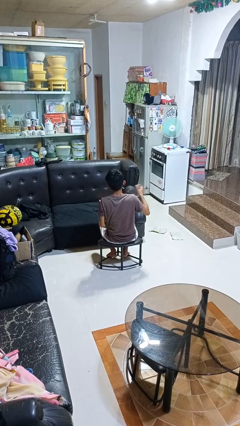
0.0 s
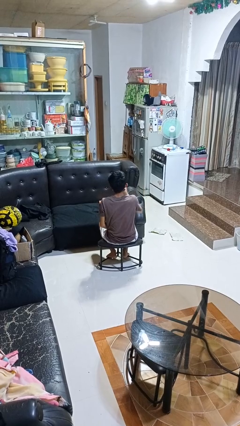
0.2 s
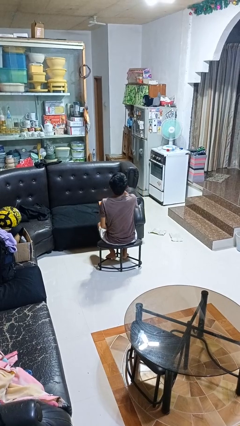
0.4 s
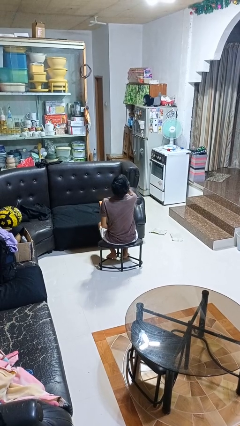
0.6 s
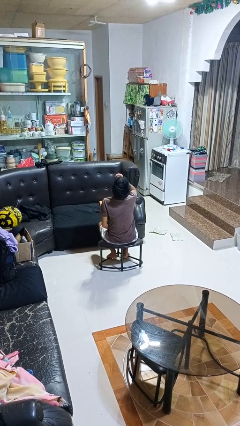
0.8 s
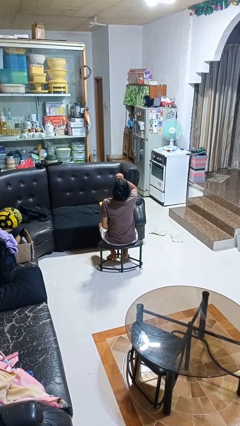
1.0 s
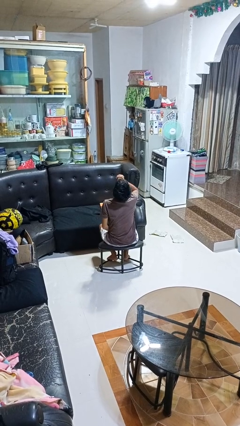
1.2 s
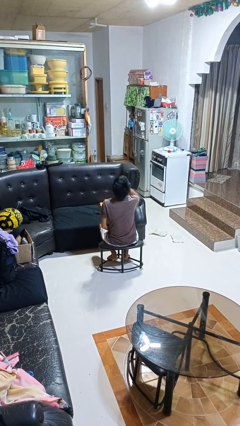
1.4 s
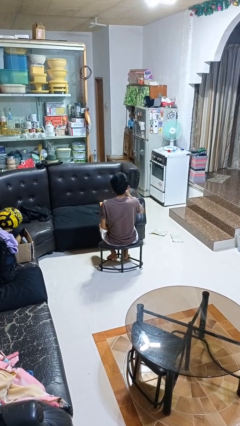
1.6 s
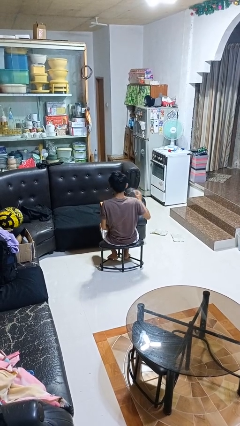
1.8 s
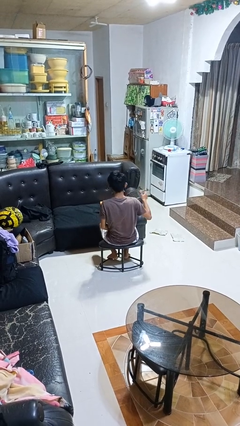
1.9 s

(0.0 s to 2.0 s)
person drinks from beverage can

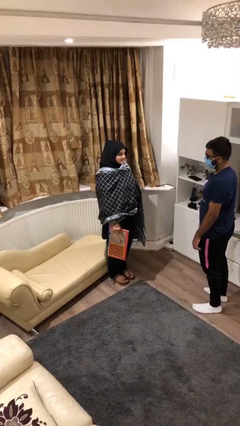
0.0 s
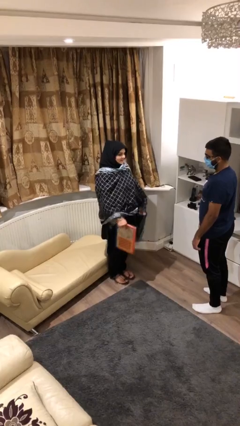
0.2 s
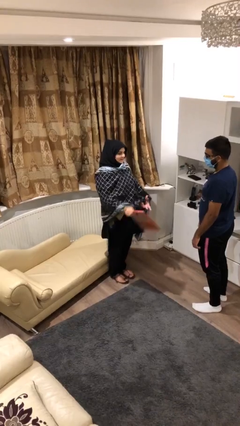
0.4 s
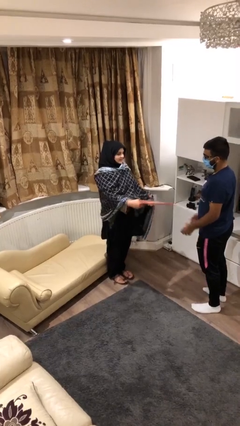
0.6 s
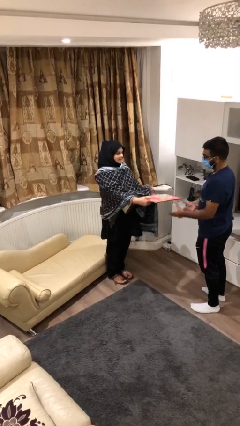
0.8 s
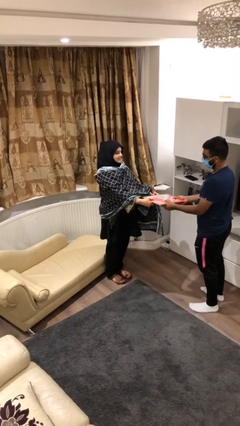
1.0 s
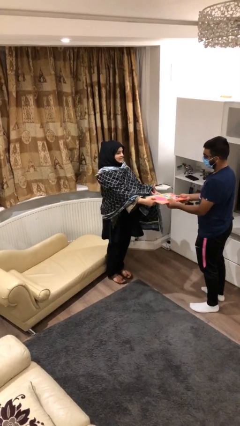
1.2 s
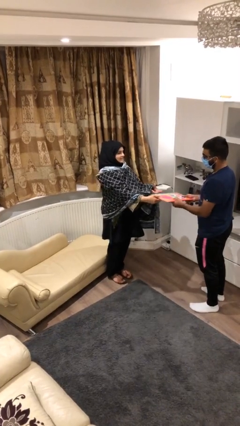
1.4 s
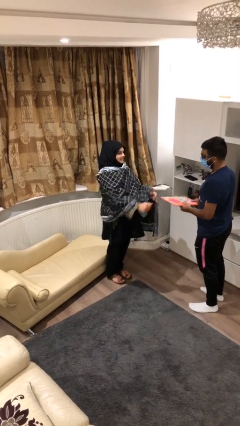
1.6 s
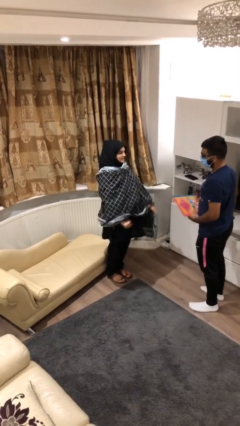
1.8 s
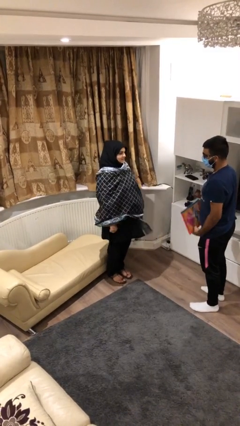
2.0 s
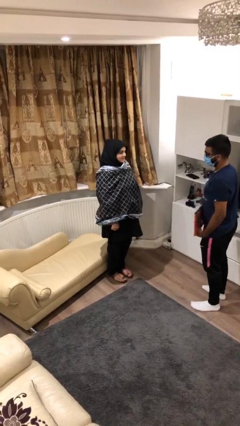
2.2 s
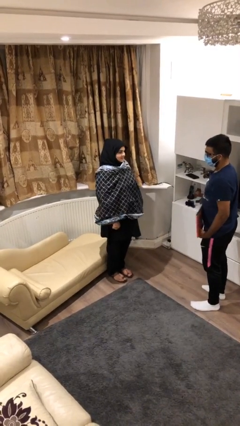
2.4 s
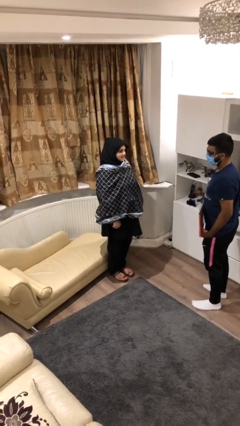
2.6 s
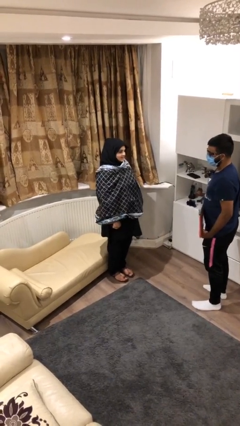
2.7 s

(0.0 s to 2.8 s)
person transfers object to person

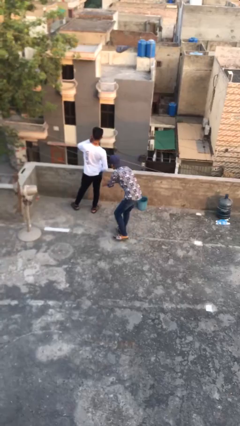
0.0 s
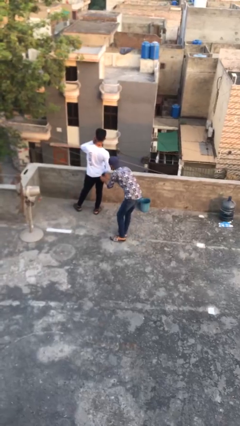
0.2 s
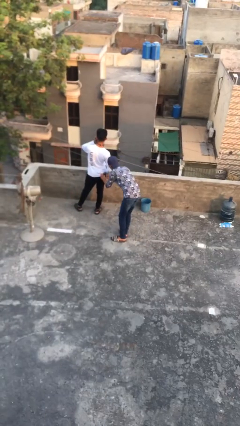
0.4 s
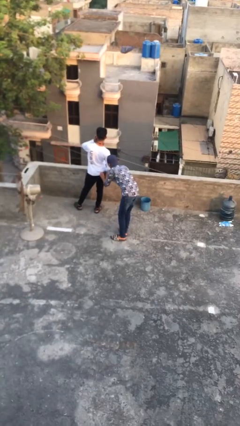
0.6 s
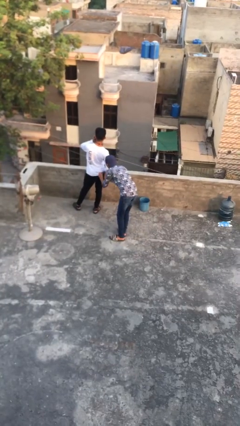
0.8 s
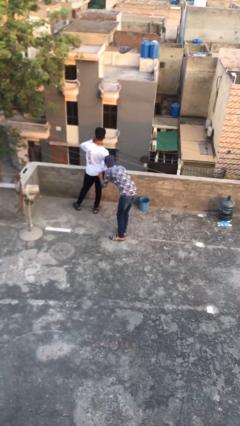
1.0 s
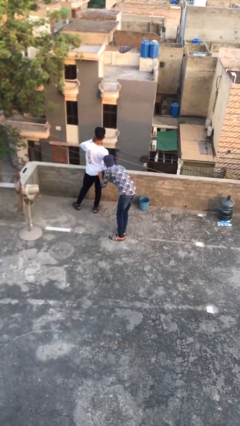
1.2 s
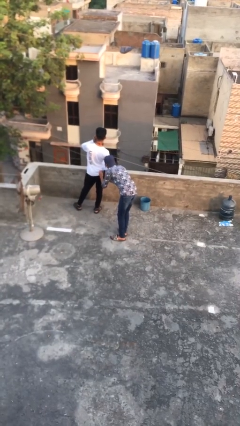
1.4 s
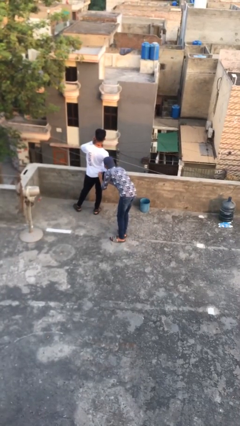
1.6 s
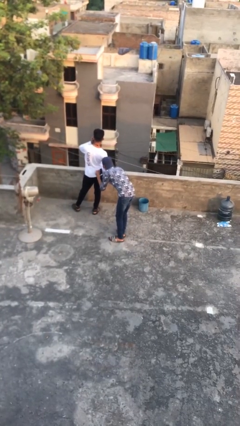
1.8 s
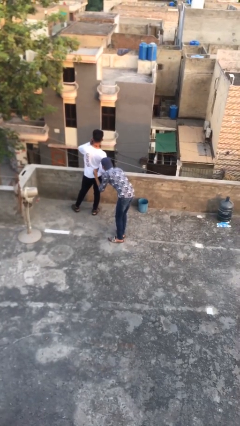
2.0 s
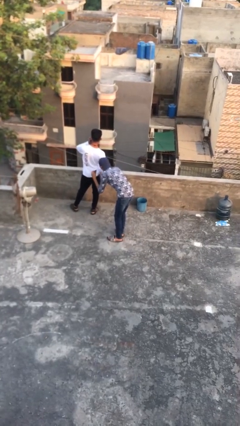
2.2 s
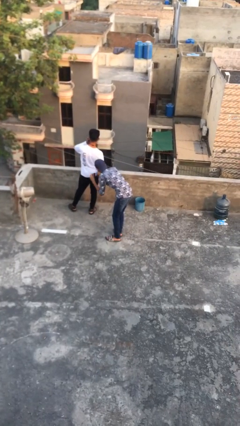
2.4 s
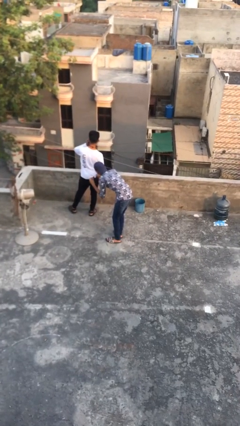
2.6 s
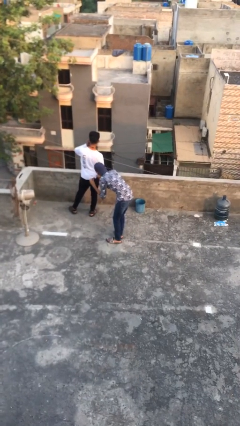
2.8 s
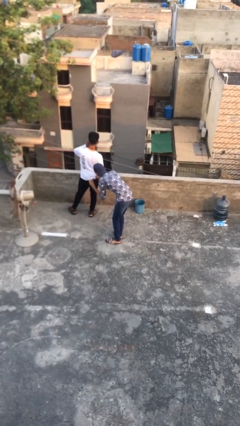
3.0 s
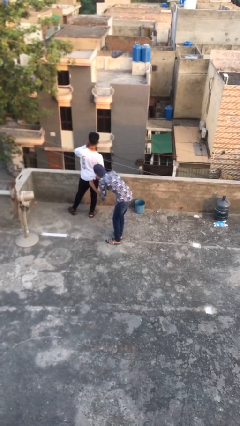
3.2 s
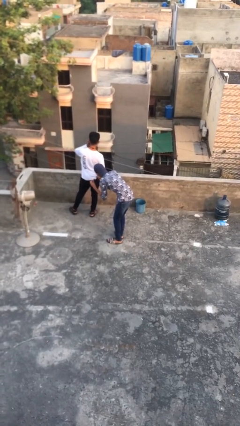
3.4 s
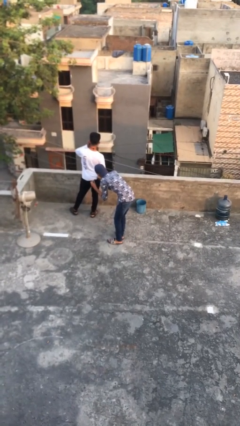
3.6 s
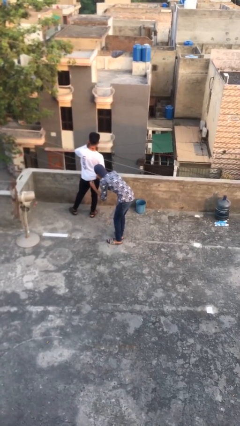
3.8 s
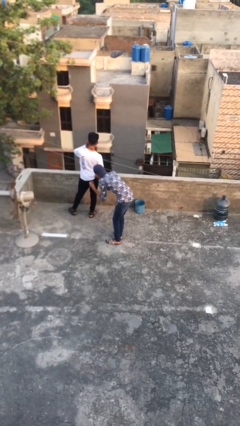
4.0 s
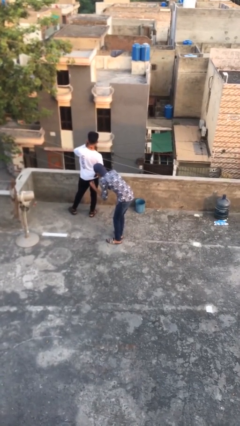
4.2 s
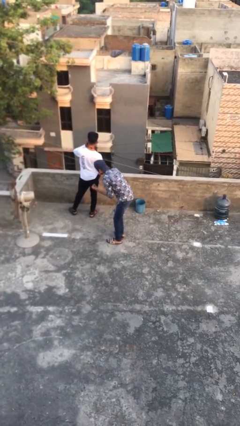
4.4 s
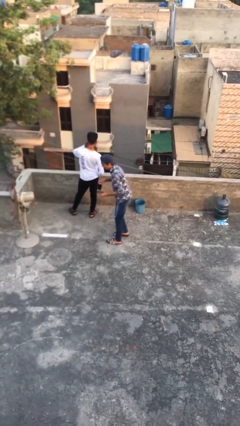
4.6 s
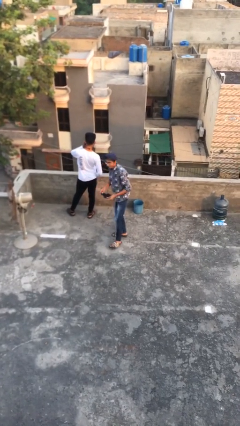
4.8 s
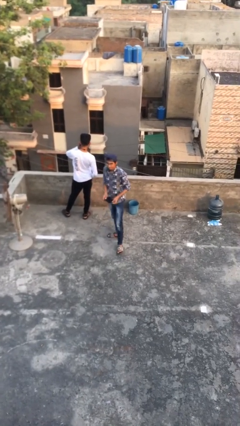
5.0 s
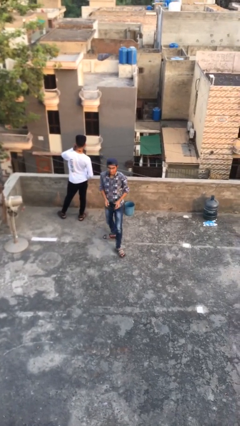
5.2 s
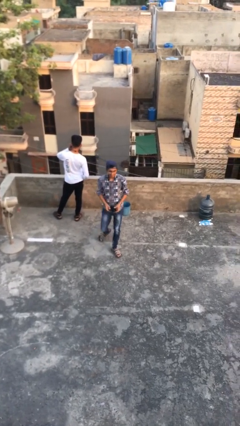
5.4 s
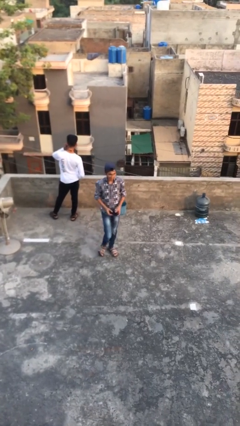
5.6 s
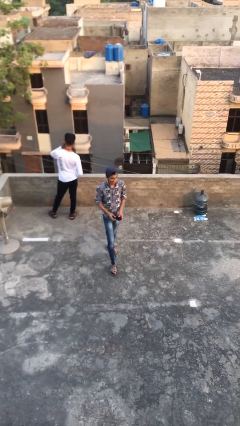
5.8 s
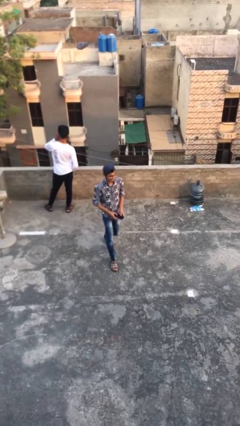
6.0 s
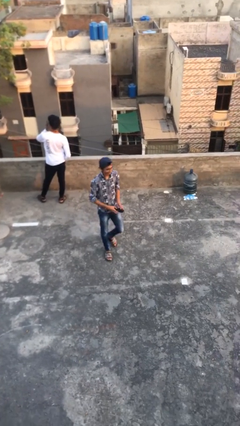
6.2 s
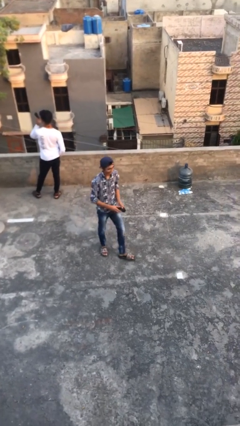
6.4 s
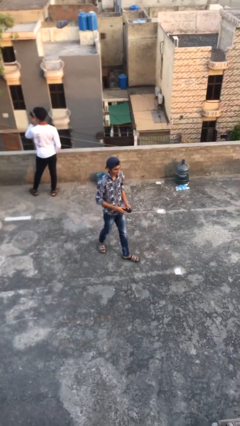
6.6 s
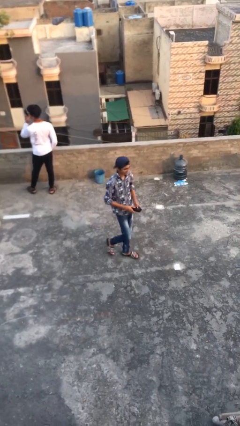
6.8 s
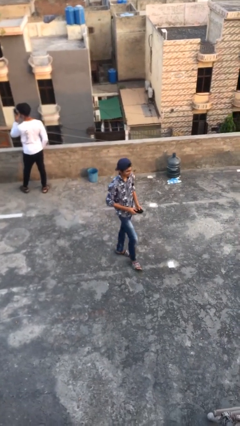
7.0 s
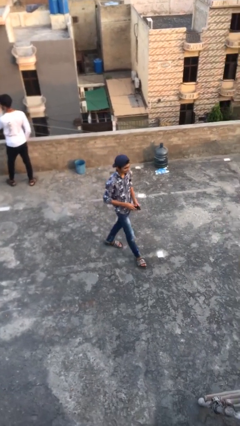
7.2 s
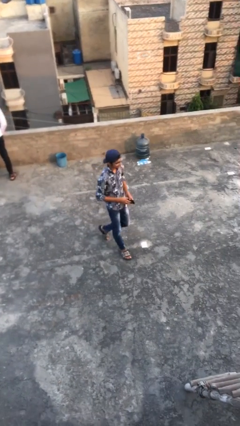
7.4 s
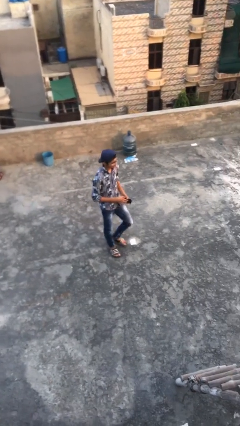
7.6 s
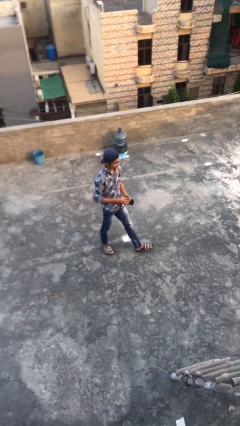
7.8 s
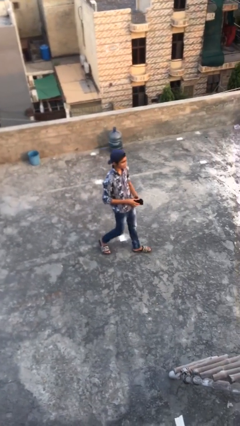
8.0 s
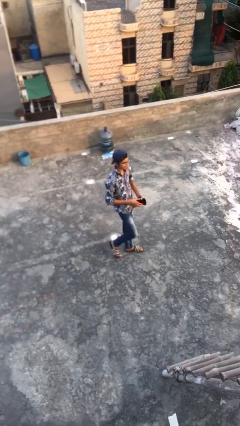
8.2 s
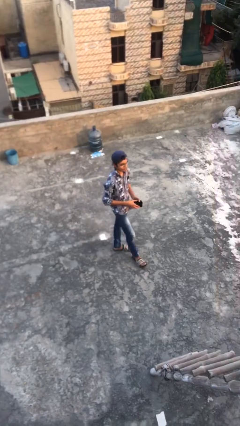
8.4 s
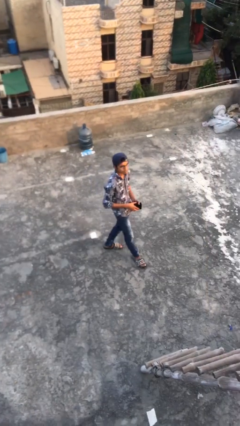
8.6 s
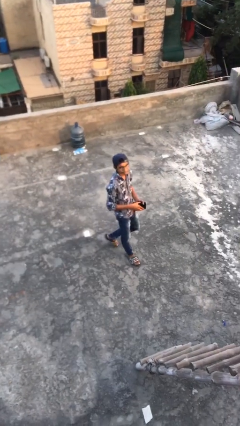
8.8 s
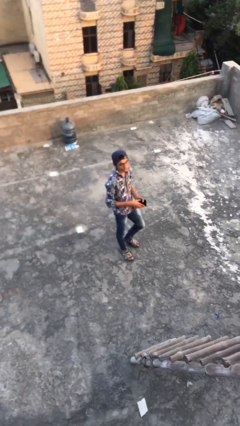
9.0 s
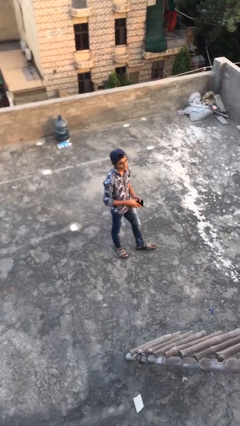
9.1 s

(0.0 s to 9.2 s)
person steals object from person

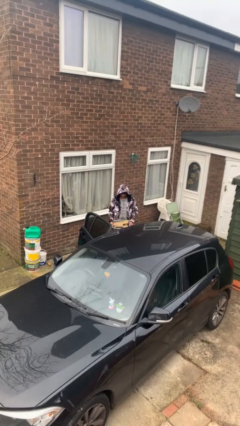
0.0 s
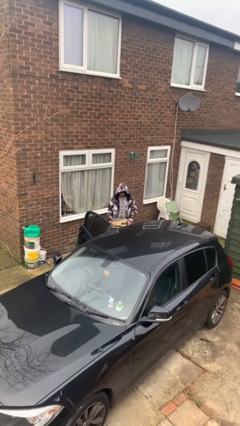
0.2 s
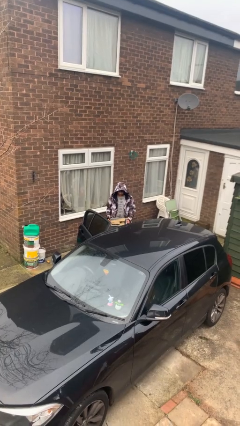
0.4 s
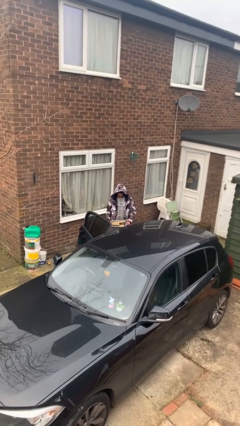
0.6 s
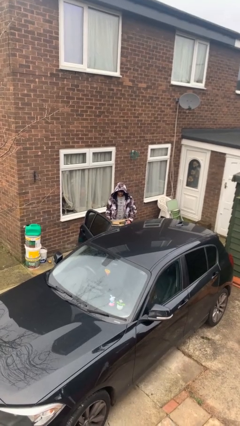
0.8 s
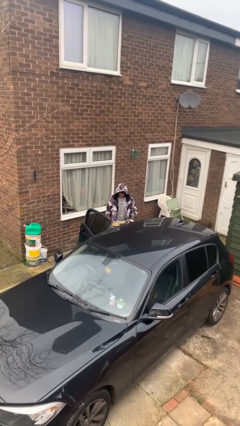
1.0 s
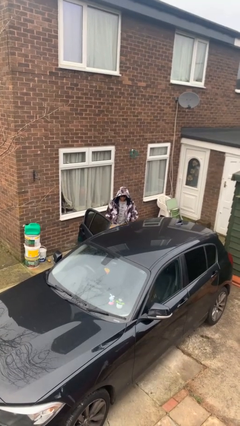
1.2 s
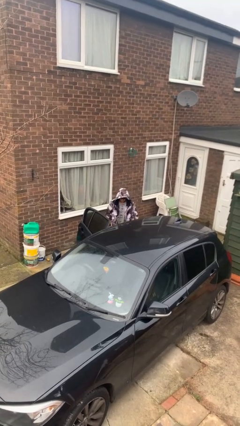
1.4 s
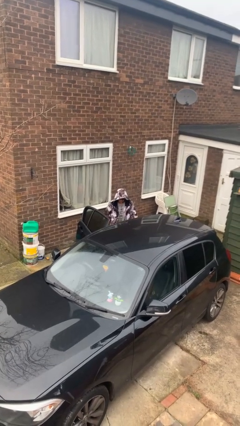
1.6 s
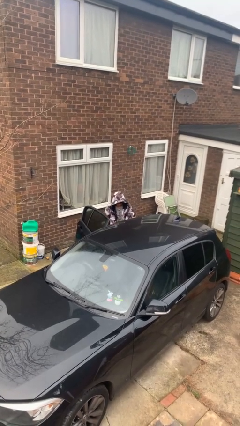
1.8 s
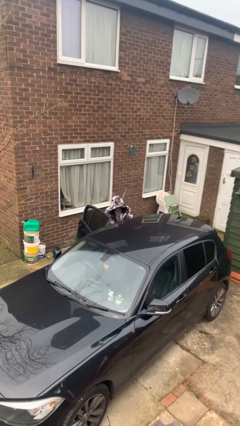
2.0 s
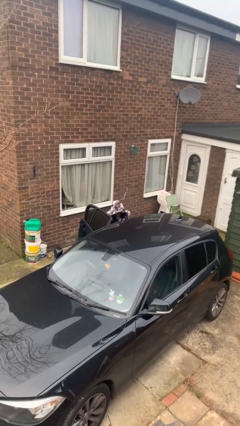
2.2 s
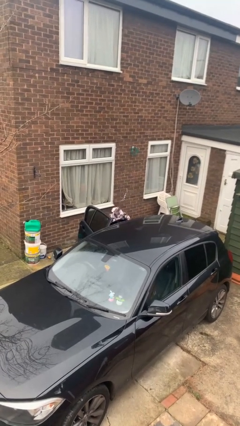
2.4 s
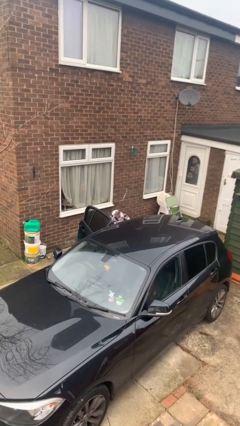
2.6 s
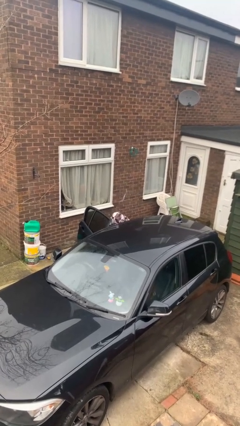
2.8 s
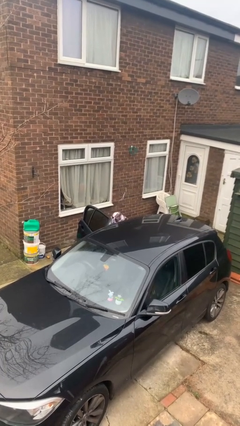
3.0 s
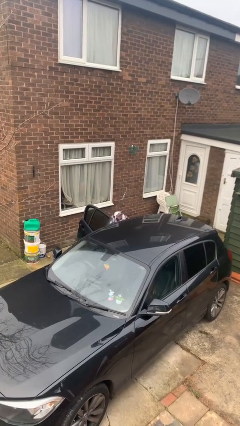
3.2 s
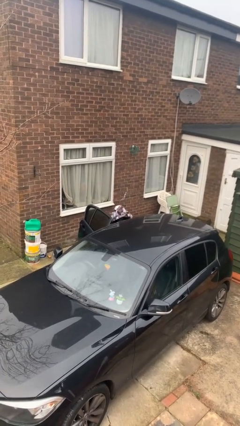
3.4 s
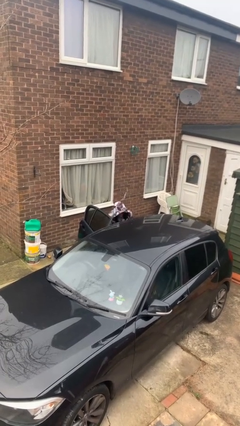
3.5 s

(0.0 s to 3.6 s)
person loads car

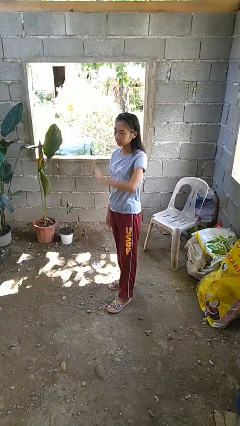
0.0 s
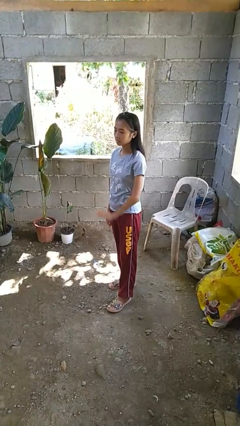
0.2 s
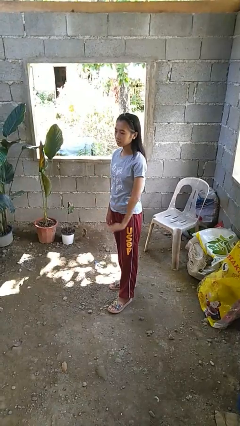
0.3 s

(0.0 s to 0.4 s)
person gestures swipe down
